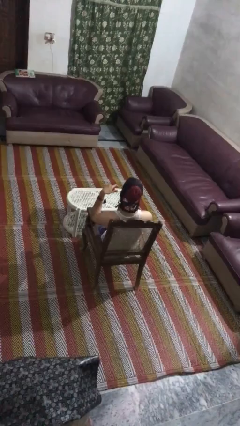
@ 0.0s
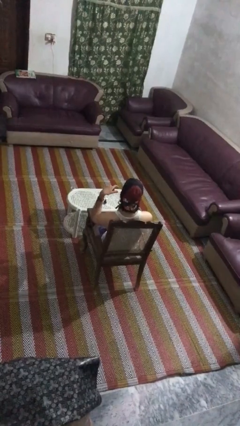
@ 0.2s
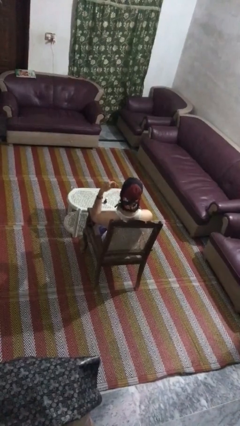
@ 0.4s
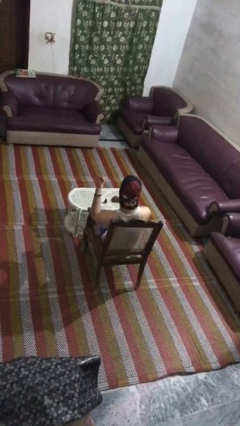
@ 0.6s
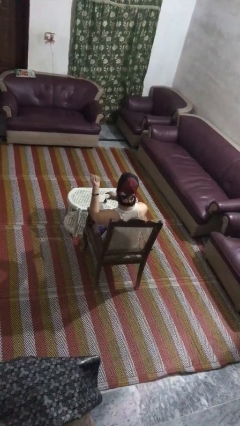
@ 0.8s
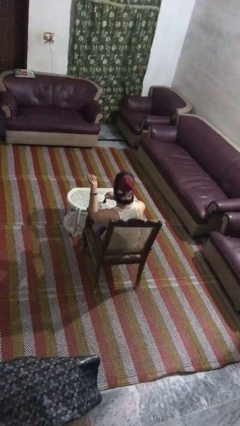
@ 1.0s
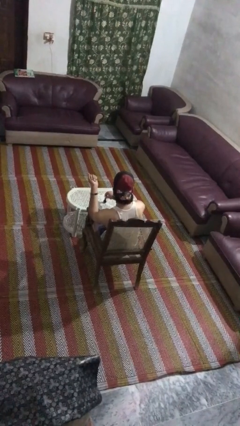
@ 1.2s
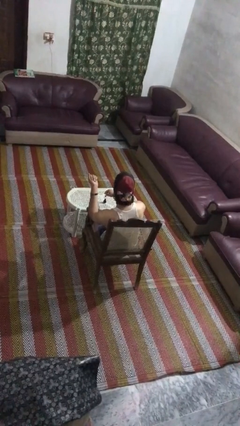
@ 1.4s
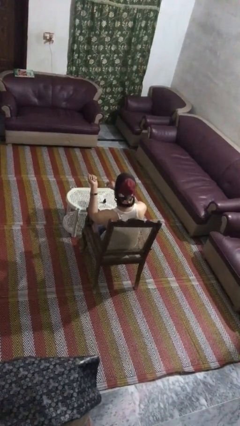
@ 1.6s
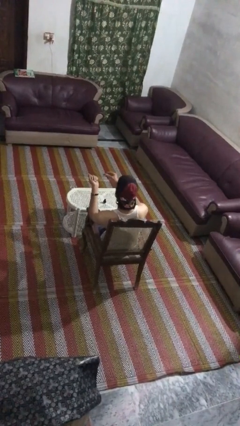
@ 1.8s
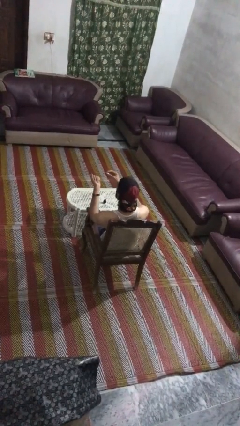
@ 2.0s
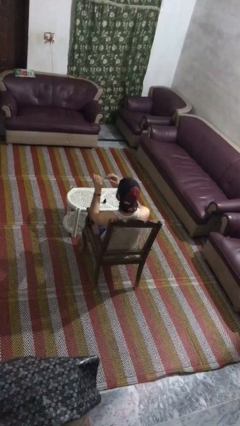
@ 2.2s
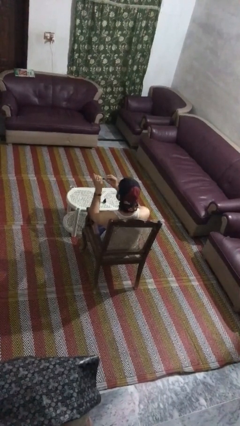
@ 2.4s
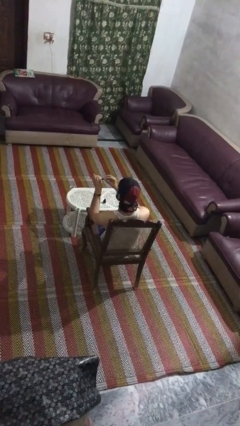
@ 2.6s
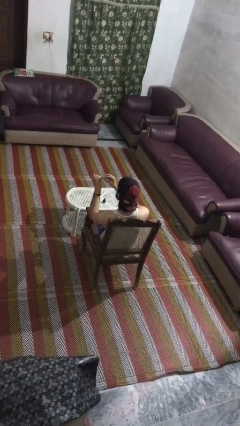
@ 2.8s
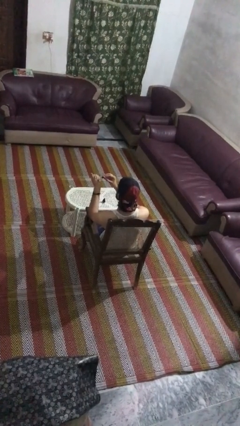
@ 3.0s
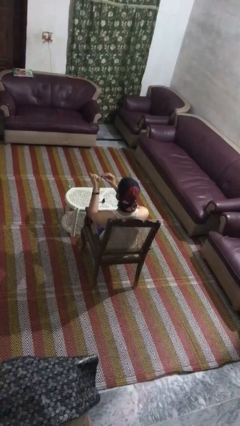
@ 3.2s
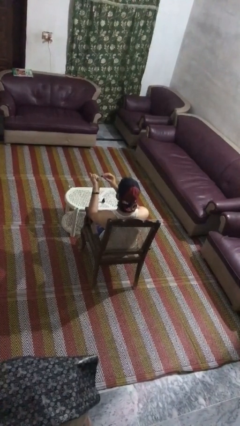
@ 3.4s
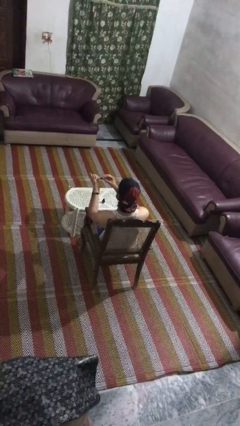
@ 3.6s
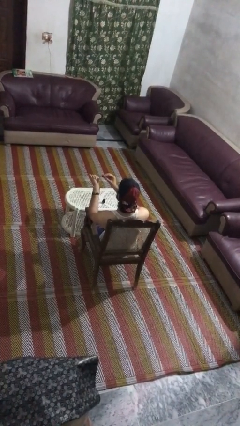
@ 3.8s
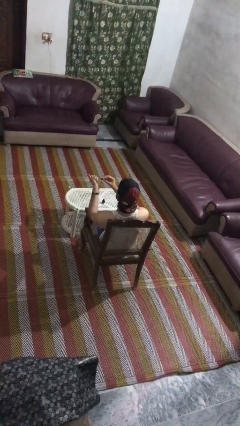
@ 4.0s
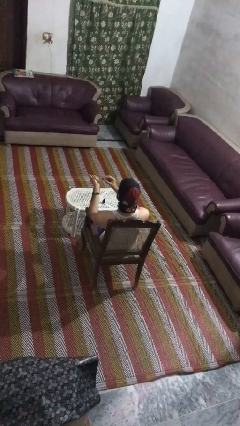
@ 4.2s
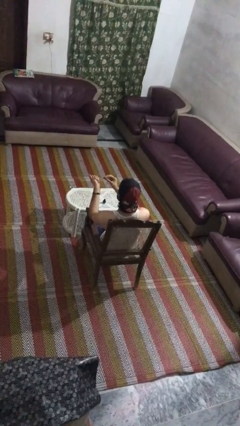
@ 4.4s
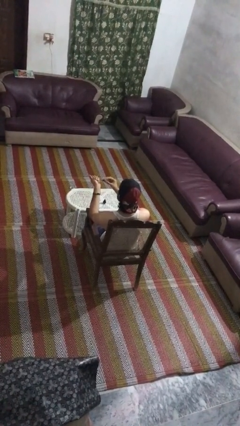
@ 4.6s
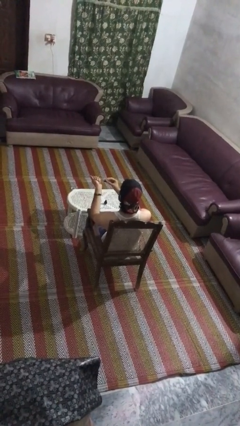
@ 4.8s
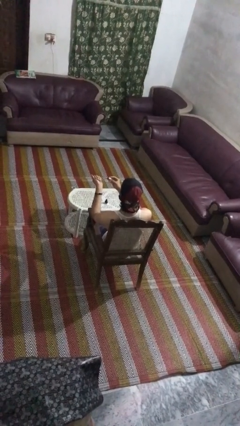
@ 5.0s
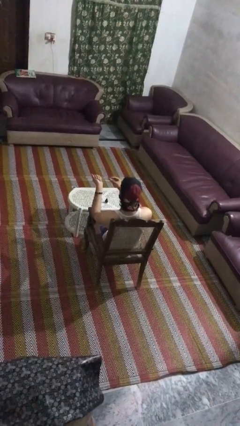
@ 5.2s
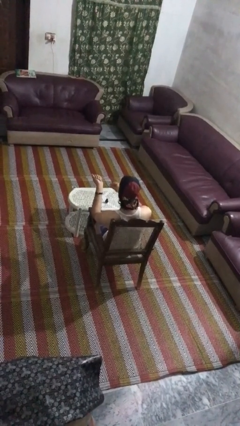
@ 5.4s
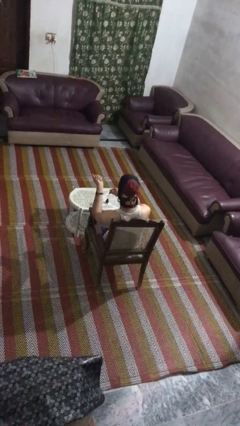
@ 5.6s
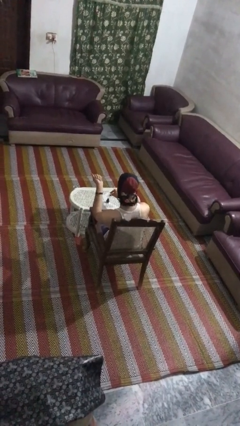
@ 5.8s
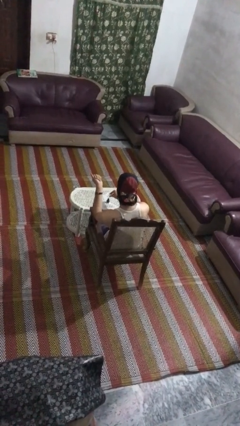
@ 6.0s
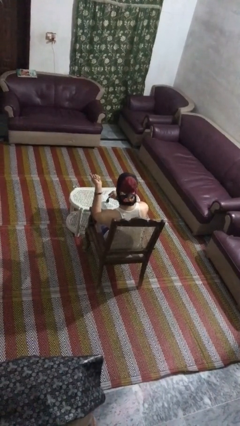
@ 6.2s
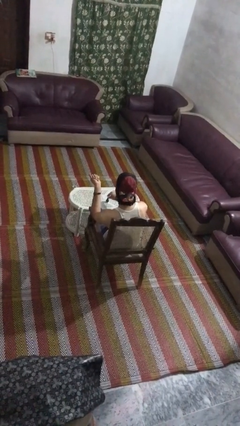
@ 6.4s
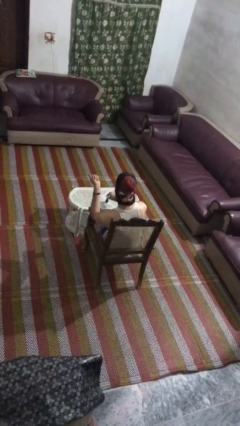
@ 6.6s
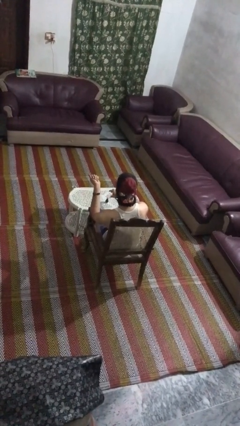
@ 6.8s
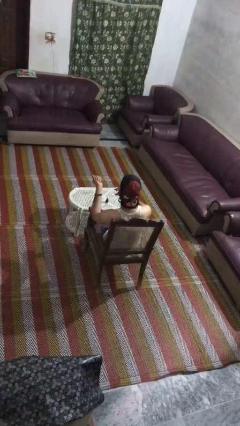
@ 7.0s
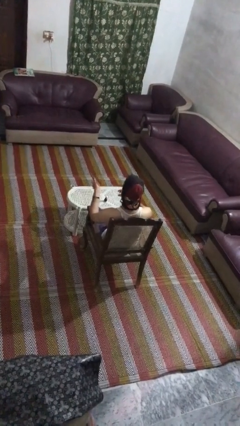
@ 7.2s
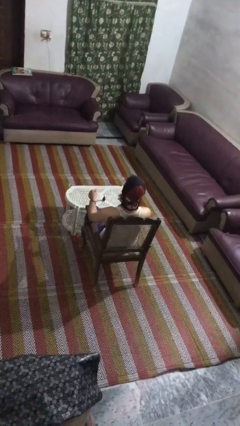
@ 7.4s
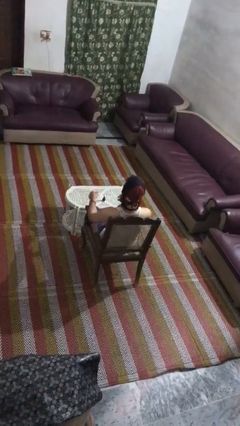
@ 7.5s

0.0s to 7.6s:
person paints fingernails

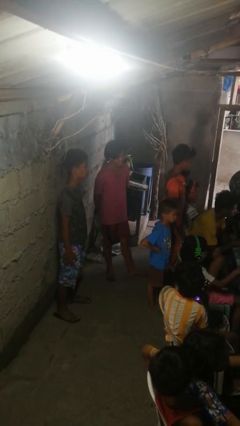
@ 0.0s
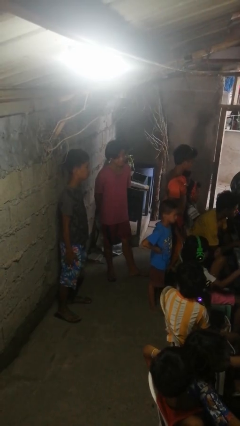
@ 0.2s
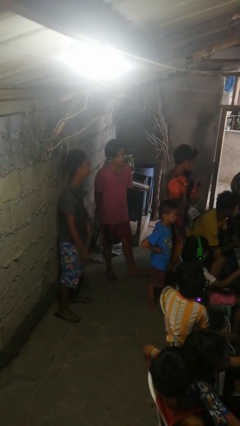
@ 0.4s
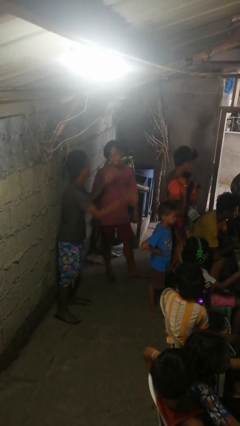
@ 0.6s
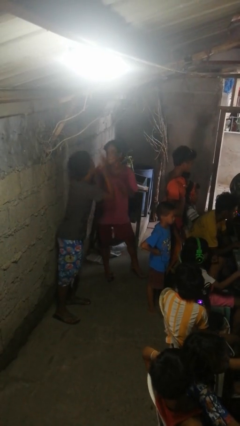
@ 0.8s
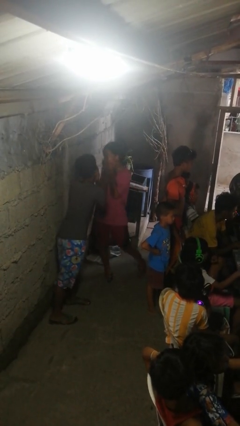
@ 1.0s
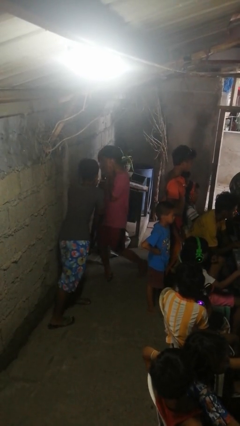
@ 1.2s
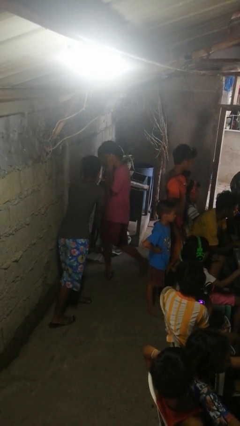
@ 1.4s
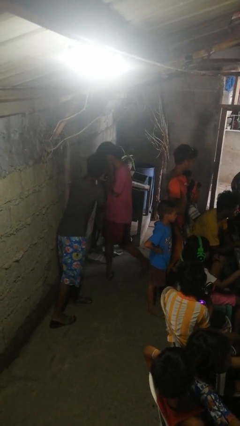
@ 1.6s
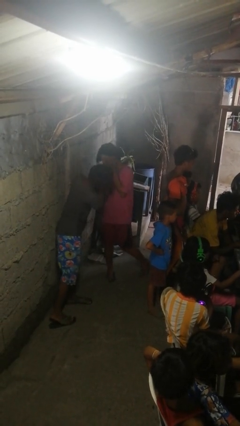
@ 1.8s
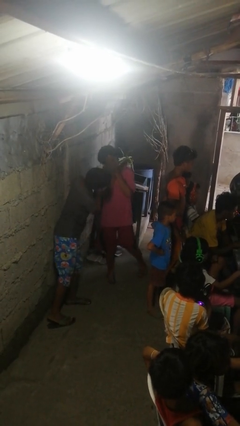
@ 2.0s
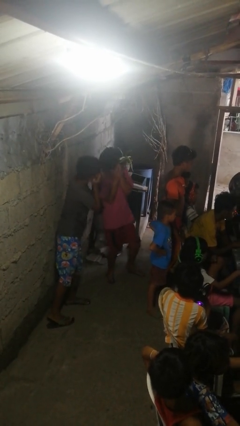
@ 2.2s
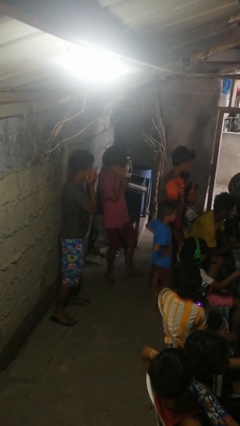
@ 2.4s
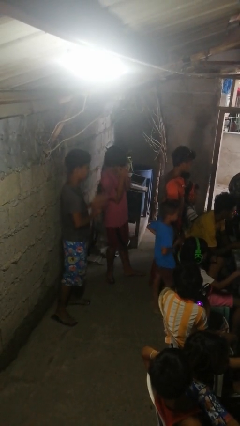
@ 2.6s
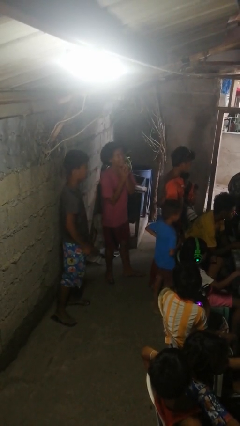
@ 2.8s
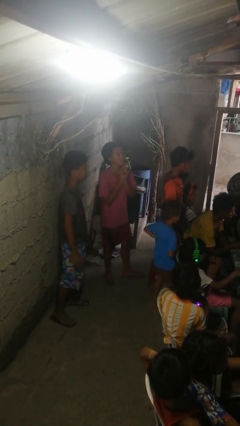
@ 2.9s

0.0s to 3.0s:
person laughs with person

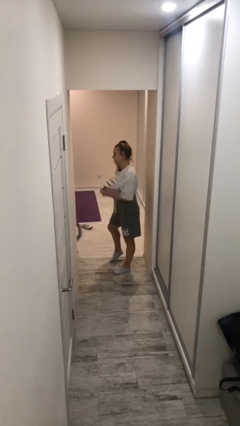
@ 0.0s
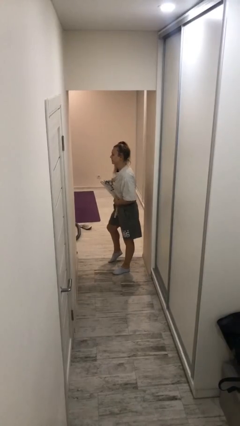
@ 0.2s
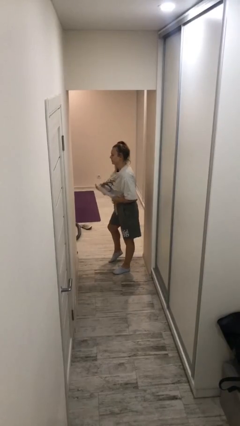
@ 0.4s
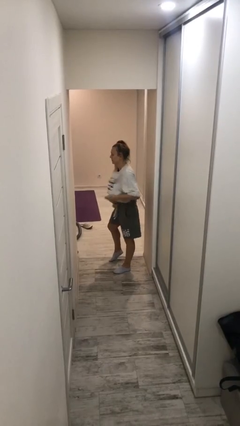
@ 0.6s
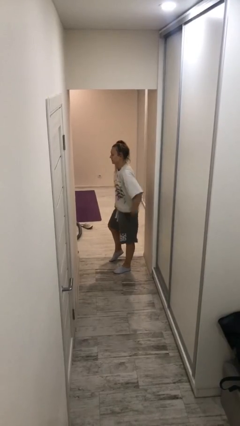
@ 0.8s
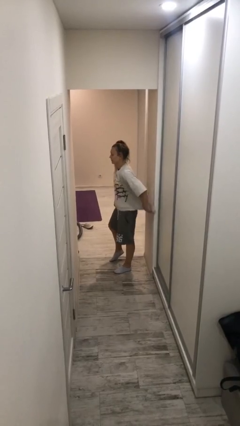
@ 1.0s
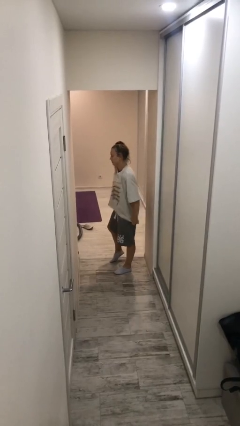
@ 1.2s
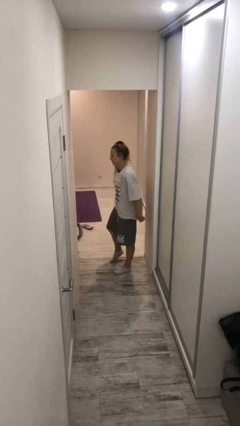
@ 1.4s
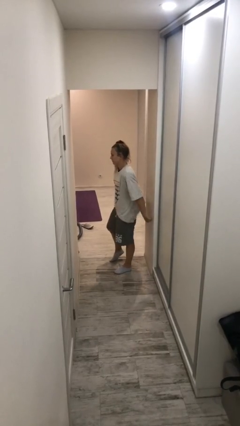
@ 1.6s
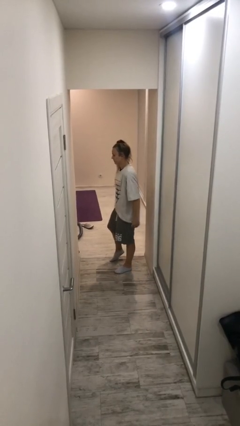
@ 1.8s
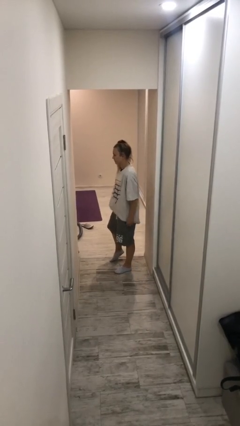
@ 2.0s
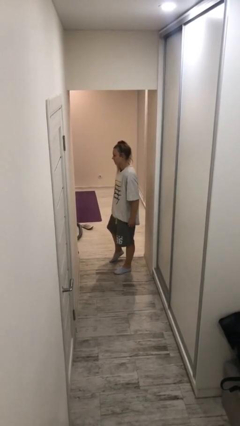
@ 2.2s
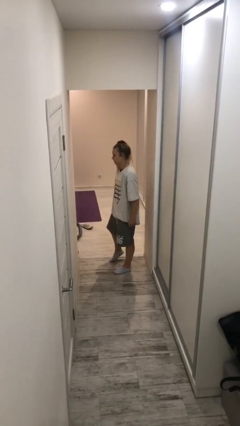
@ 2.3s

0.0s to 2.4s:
person untucks shirt

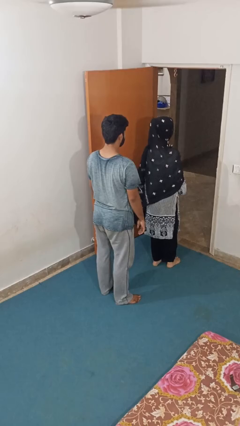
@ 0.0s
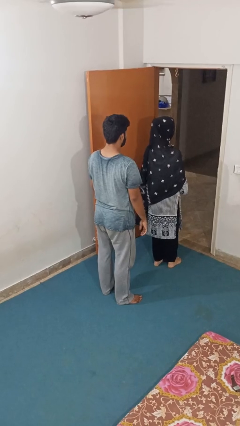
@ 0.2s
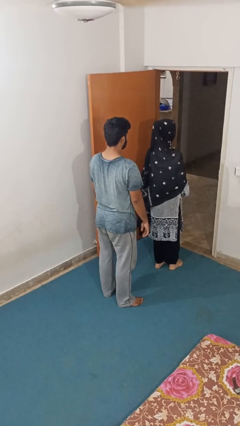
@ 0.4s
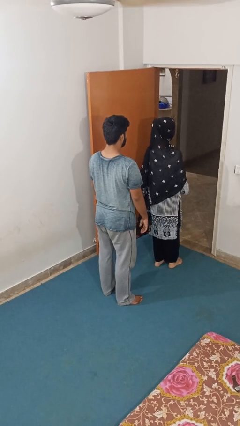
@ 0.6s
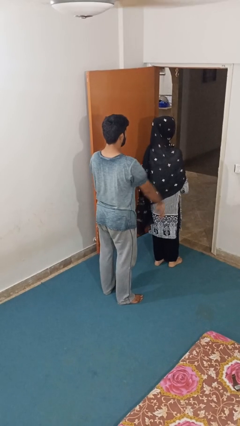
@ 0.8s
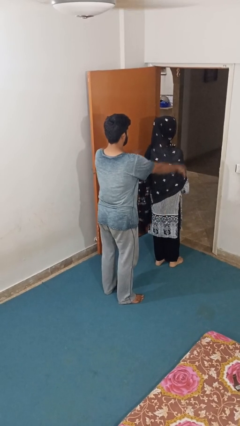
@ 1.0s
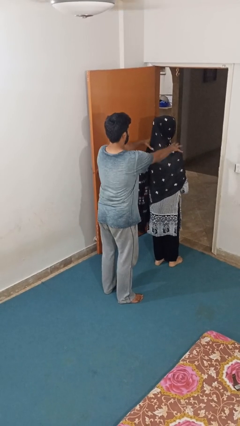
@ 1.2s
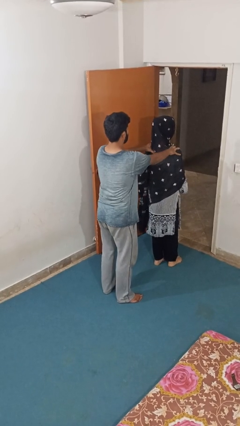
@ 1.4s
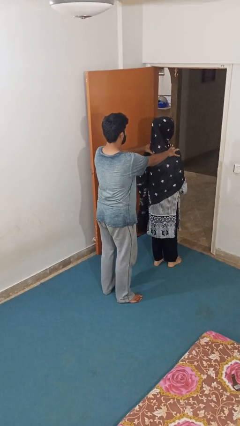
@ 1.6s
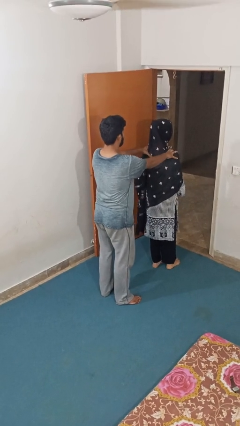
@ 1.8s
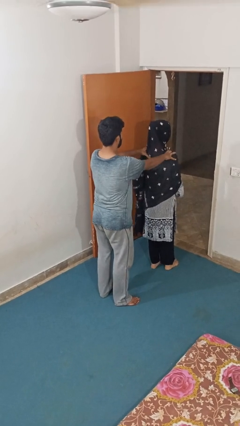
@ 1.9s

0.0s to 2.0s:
person grabs person by shoulder

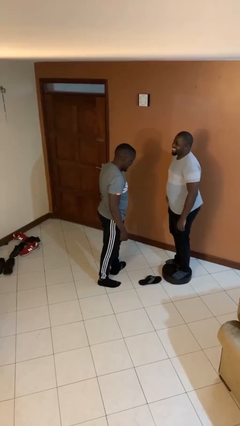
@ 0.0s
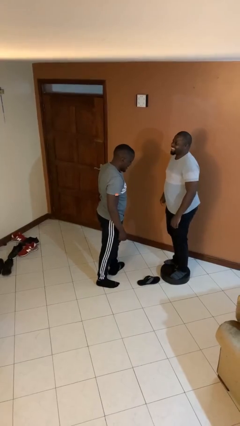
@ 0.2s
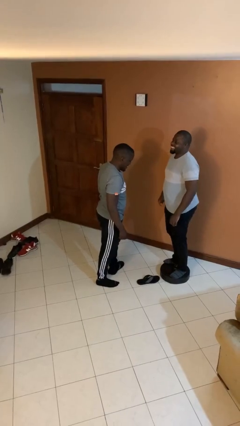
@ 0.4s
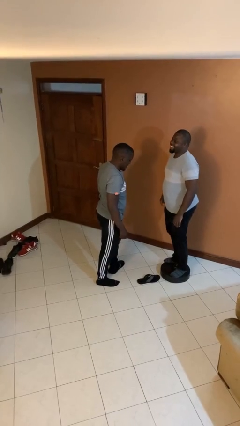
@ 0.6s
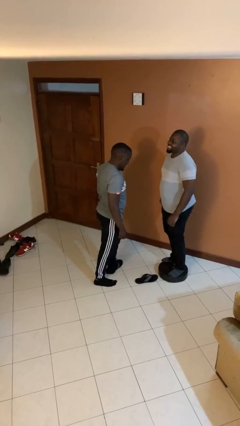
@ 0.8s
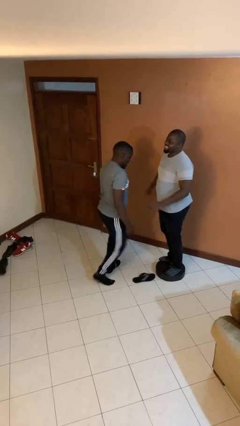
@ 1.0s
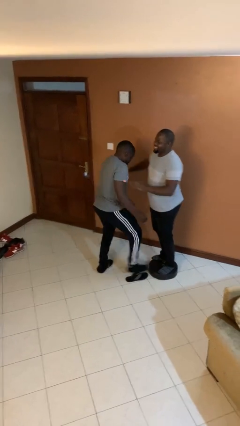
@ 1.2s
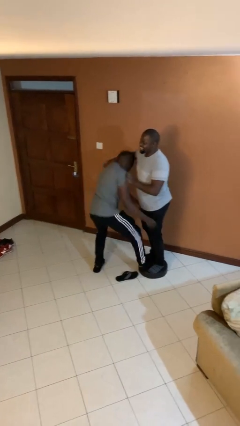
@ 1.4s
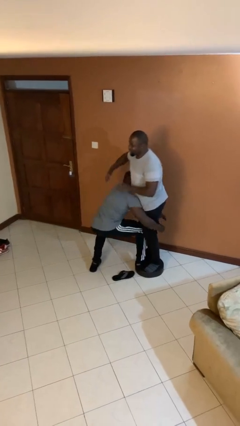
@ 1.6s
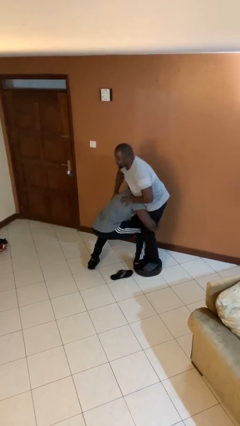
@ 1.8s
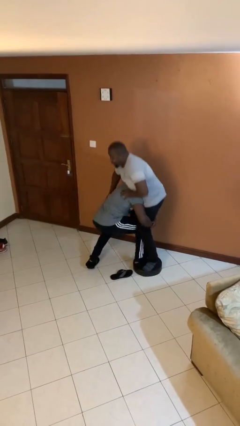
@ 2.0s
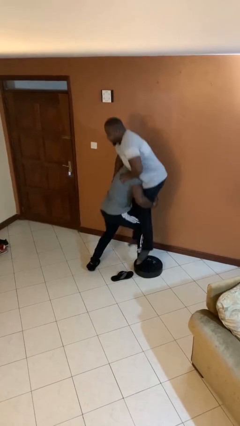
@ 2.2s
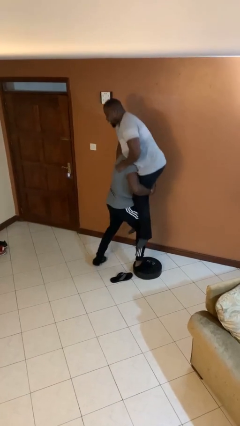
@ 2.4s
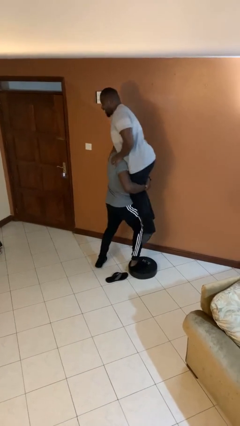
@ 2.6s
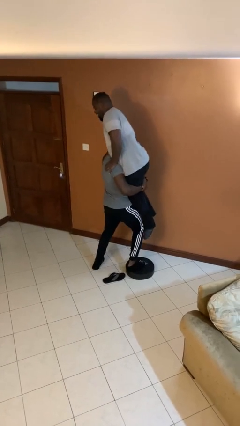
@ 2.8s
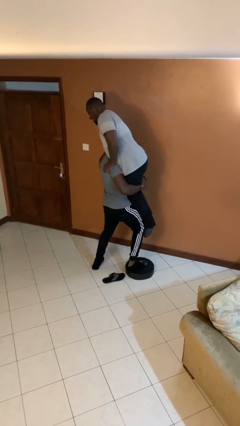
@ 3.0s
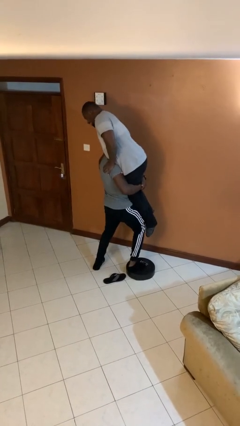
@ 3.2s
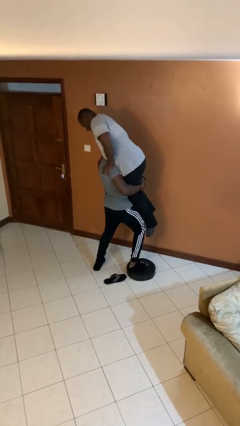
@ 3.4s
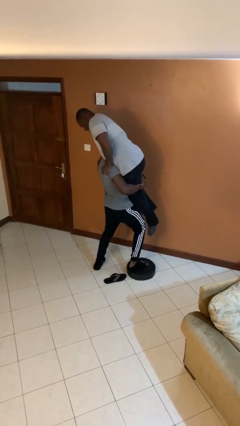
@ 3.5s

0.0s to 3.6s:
person picks up person
